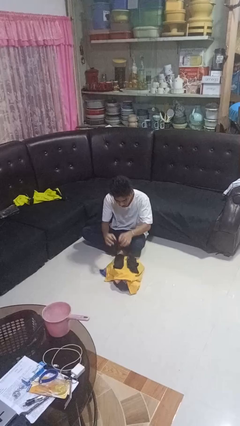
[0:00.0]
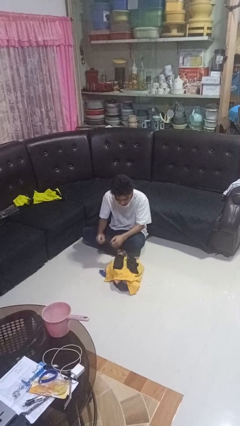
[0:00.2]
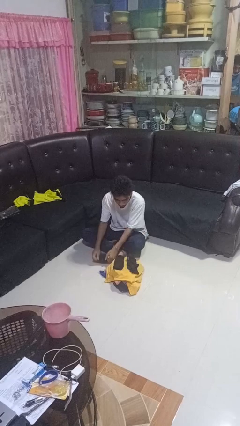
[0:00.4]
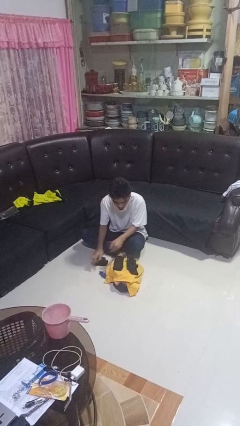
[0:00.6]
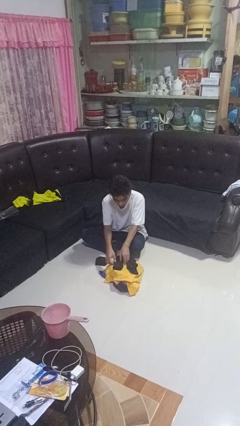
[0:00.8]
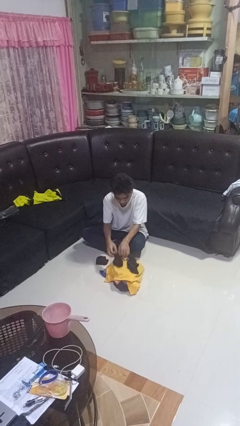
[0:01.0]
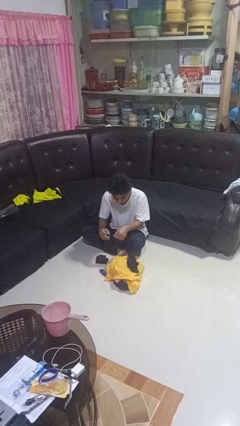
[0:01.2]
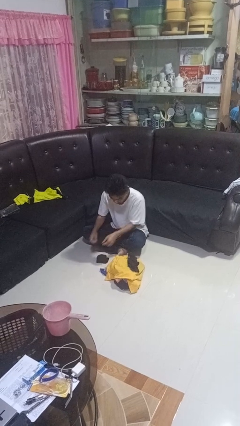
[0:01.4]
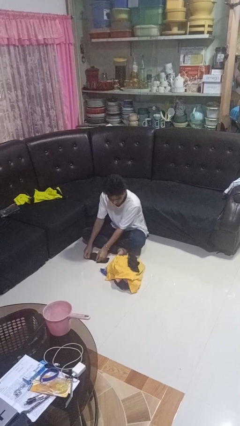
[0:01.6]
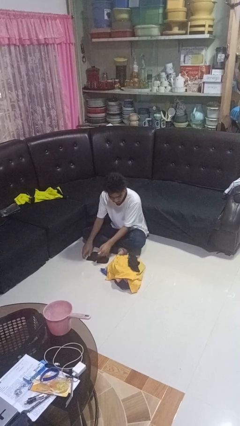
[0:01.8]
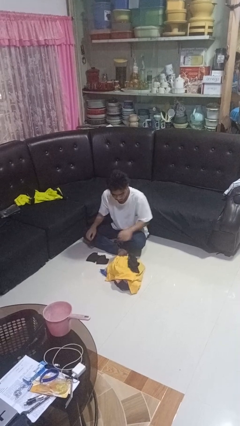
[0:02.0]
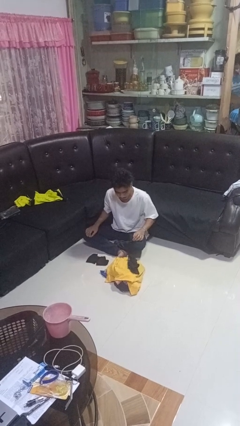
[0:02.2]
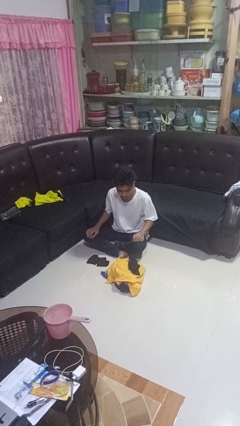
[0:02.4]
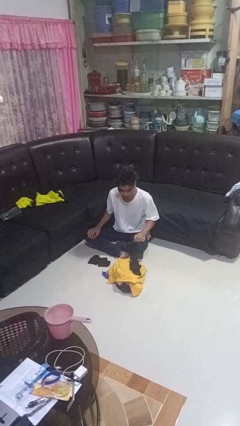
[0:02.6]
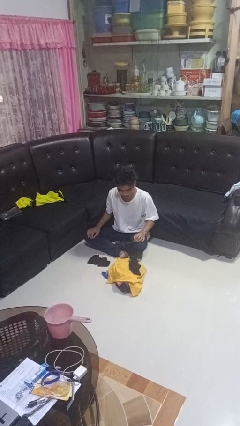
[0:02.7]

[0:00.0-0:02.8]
person folds socks

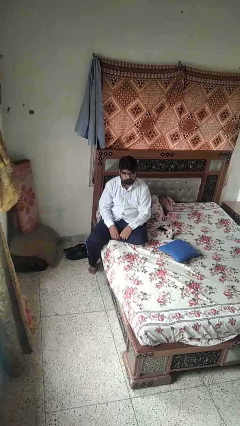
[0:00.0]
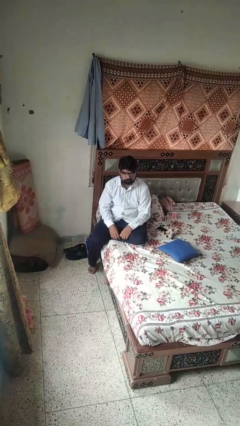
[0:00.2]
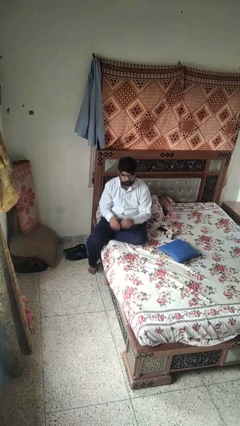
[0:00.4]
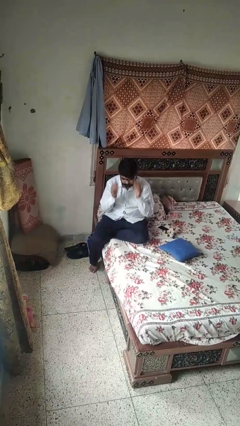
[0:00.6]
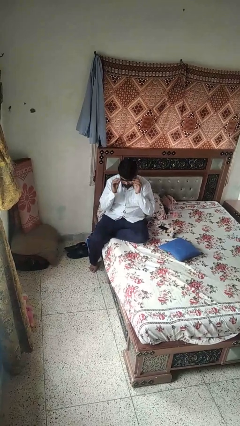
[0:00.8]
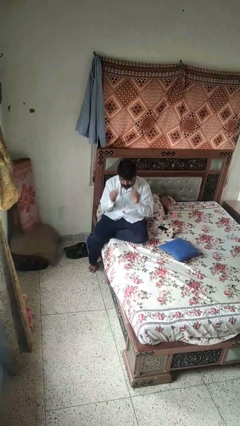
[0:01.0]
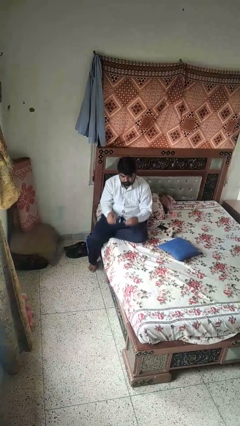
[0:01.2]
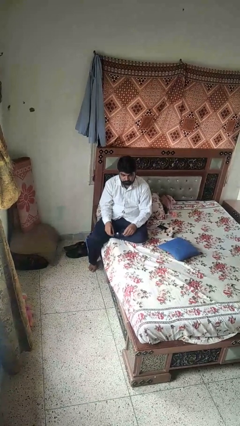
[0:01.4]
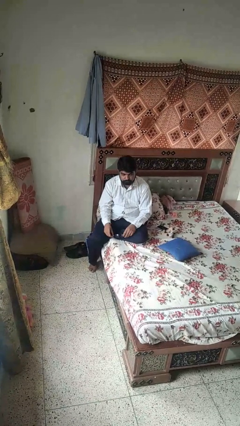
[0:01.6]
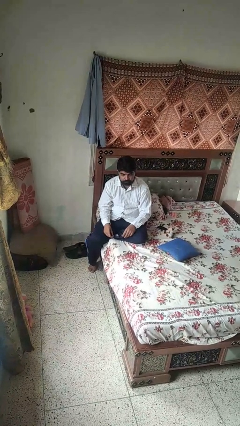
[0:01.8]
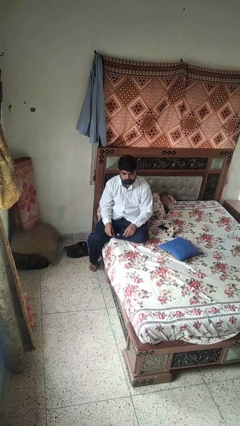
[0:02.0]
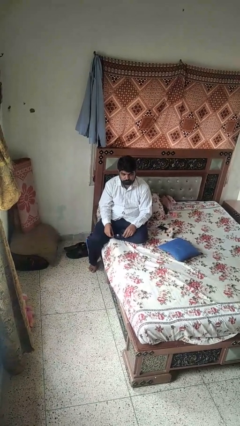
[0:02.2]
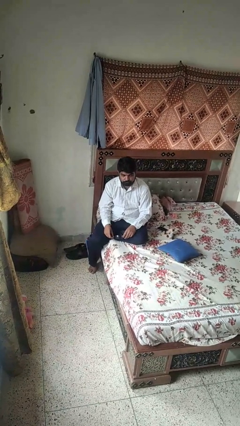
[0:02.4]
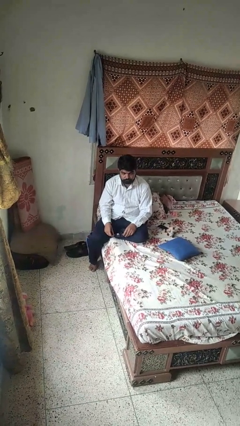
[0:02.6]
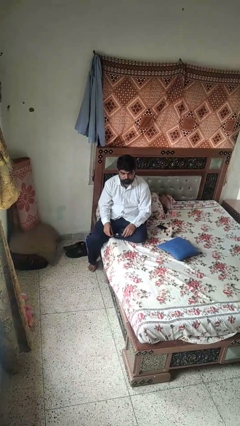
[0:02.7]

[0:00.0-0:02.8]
person takes off glasses

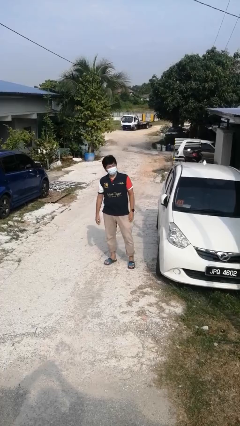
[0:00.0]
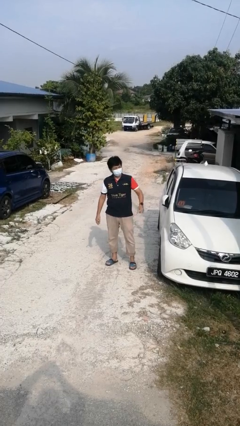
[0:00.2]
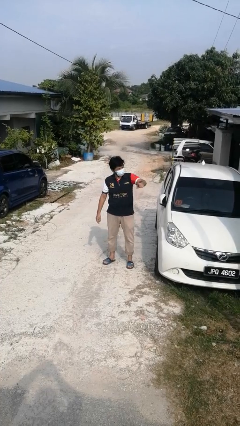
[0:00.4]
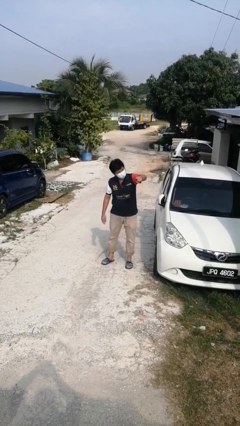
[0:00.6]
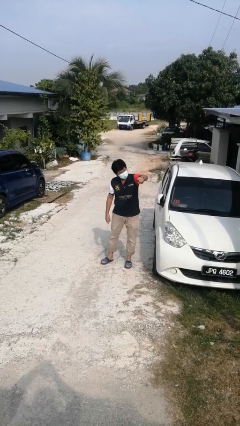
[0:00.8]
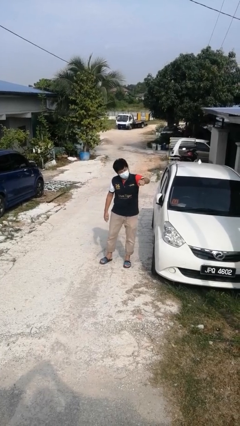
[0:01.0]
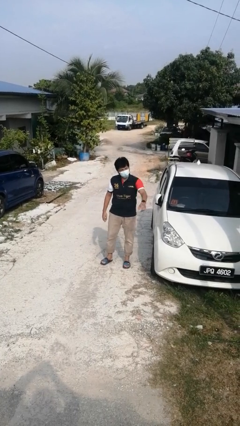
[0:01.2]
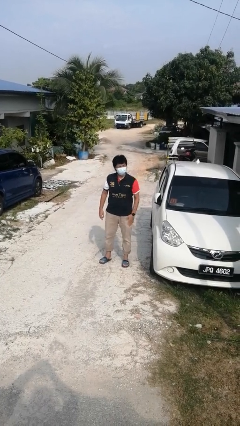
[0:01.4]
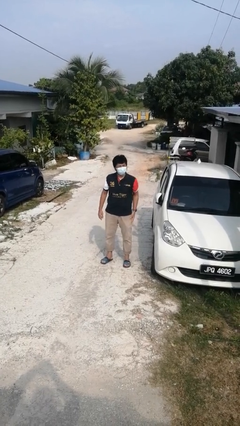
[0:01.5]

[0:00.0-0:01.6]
person points at person

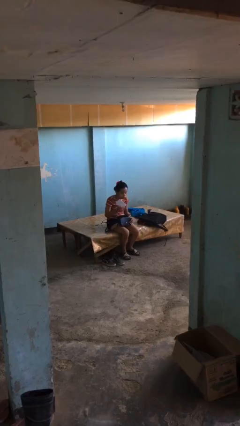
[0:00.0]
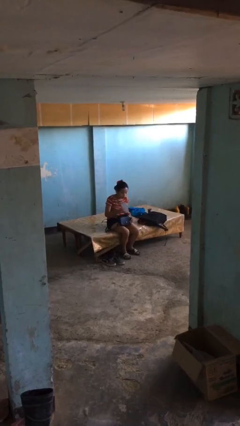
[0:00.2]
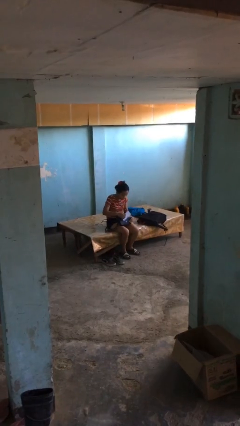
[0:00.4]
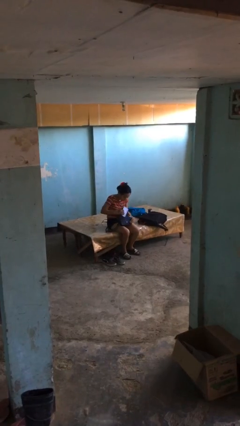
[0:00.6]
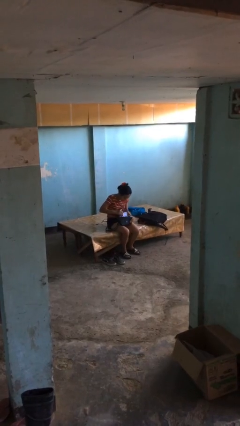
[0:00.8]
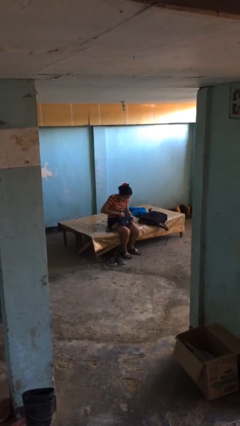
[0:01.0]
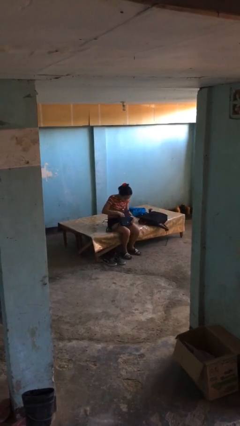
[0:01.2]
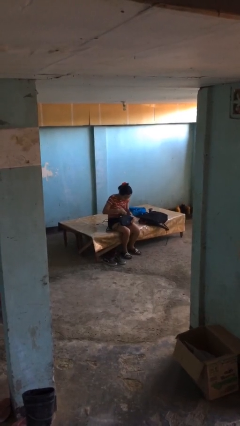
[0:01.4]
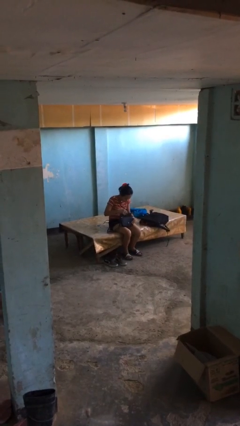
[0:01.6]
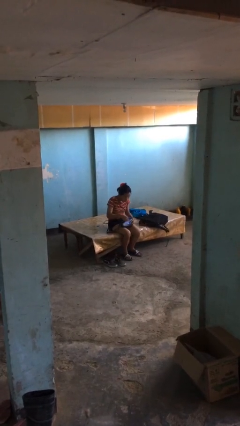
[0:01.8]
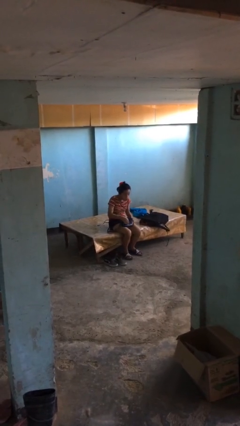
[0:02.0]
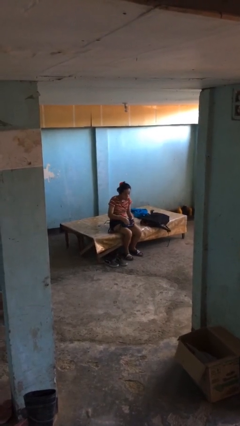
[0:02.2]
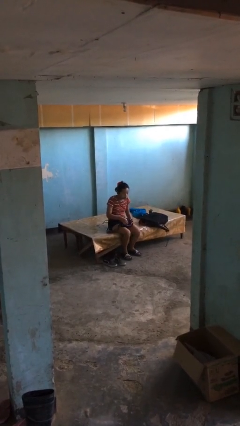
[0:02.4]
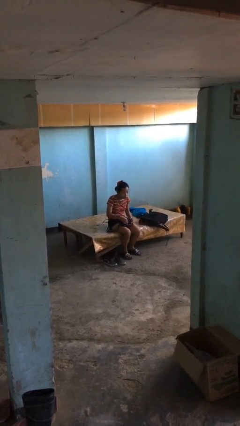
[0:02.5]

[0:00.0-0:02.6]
person puts object into purse

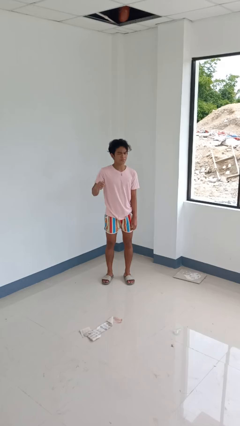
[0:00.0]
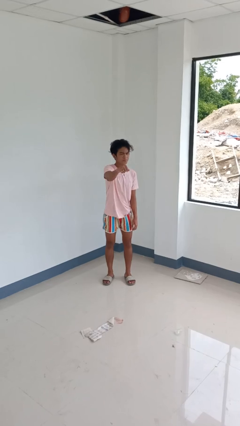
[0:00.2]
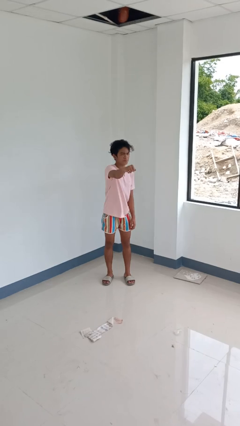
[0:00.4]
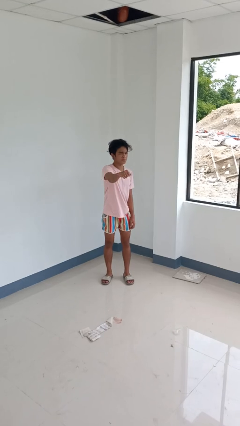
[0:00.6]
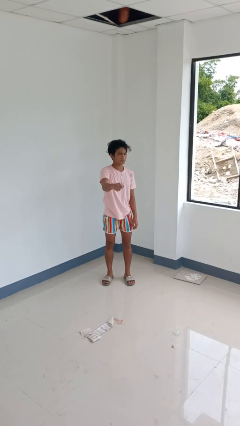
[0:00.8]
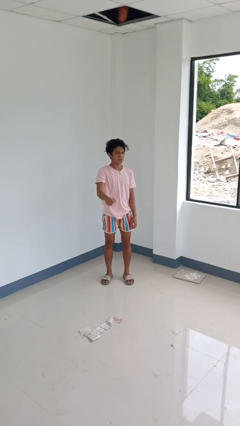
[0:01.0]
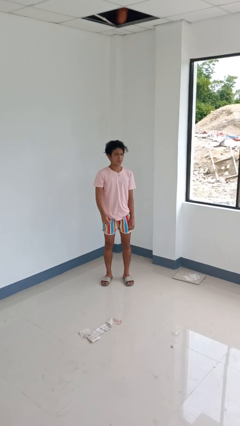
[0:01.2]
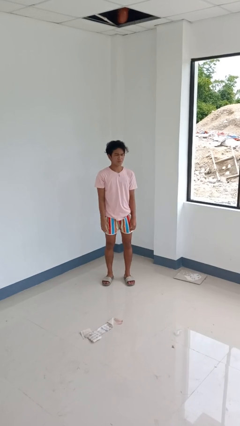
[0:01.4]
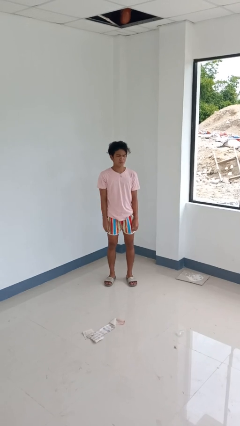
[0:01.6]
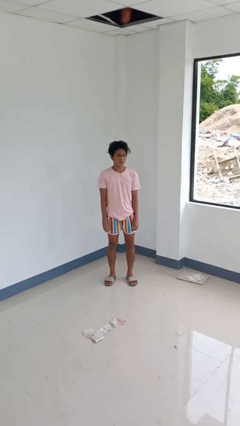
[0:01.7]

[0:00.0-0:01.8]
person punches

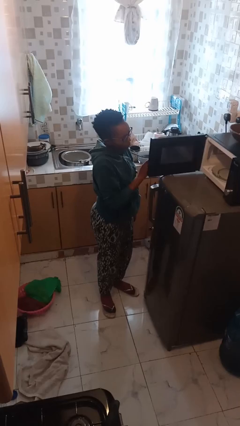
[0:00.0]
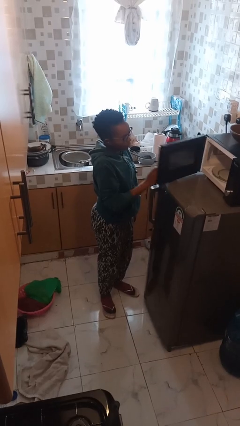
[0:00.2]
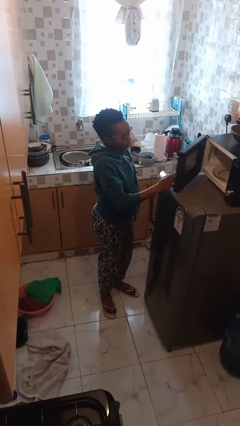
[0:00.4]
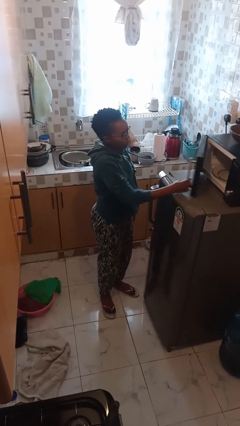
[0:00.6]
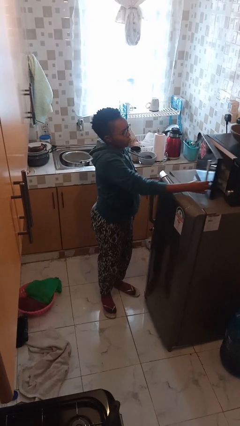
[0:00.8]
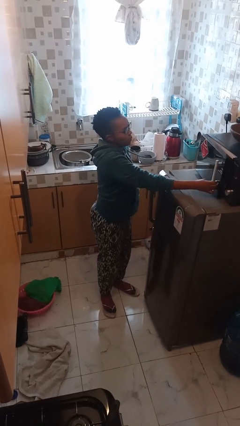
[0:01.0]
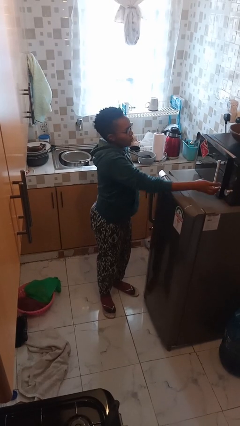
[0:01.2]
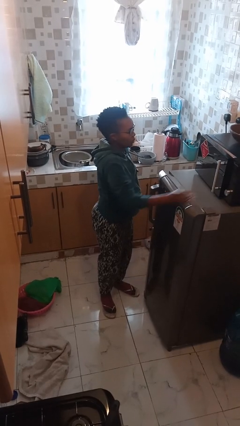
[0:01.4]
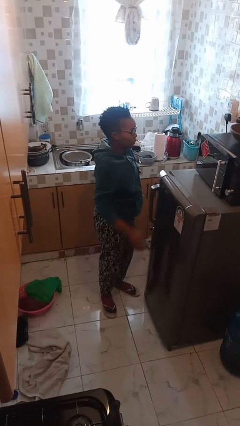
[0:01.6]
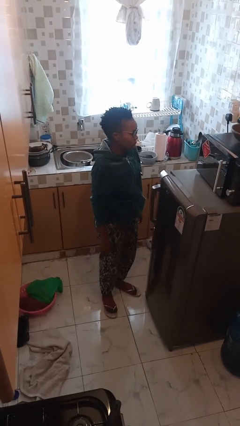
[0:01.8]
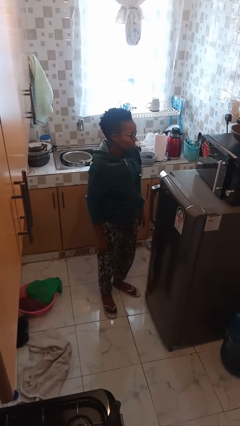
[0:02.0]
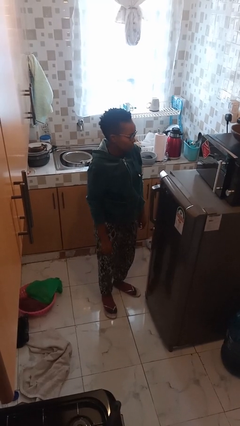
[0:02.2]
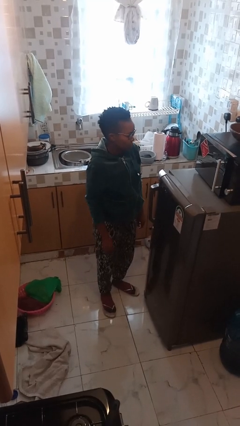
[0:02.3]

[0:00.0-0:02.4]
person closes microwave

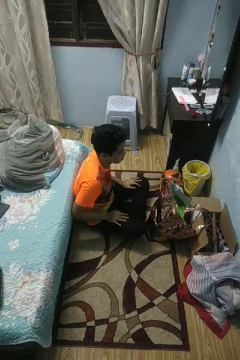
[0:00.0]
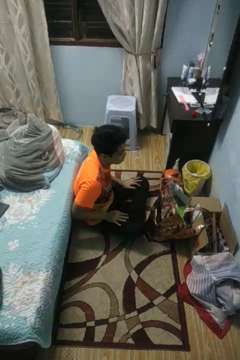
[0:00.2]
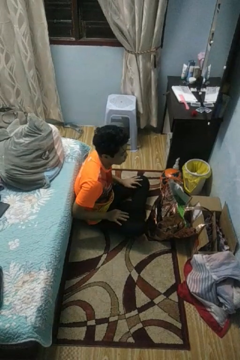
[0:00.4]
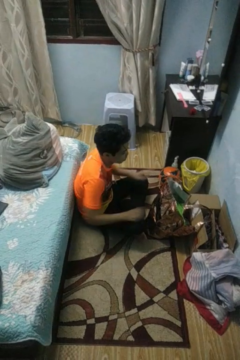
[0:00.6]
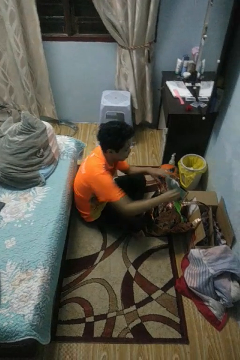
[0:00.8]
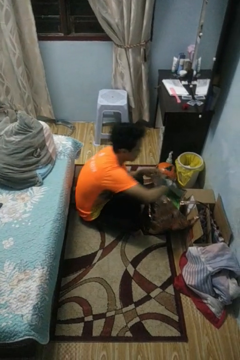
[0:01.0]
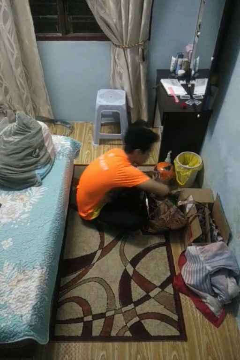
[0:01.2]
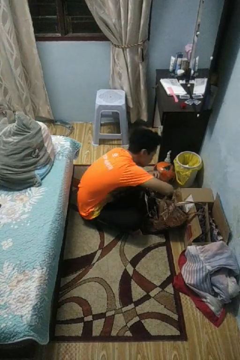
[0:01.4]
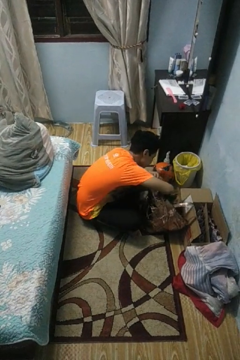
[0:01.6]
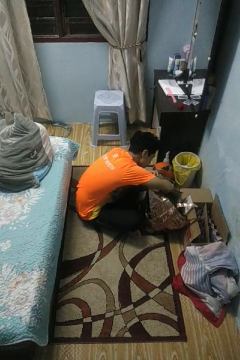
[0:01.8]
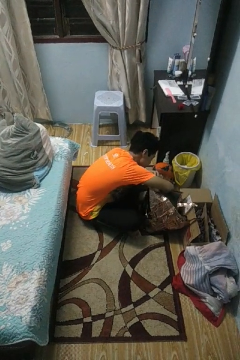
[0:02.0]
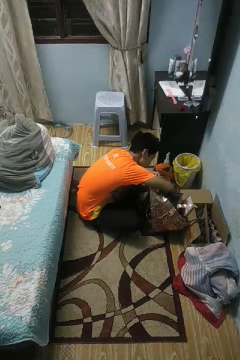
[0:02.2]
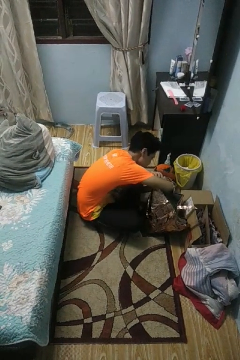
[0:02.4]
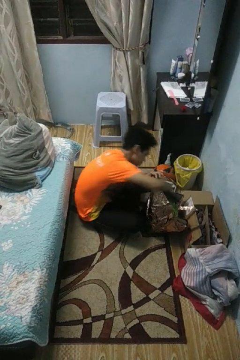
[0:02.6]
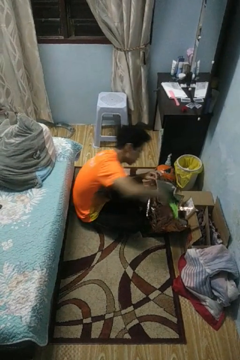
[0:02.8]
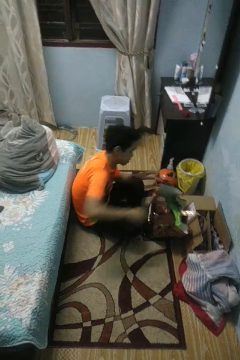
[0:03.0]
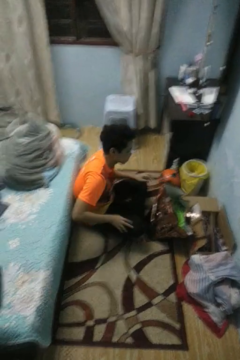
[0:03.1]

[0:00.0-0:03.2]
person searches in bag

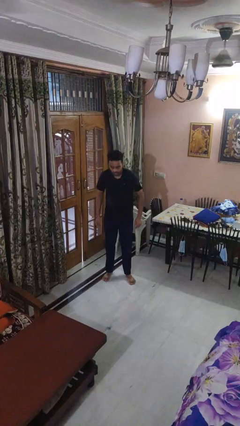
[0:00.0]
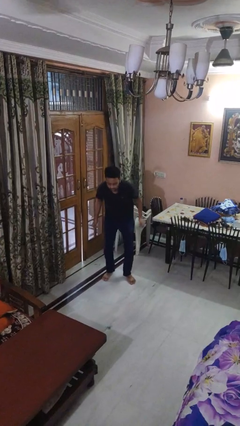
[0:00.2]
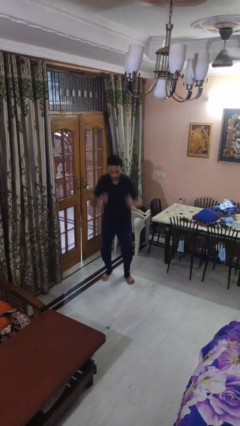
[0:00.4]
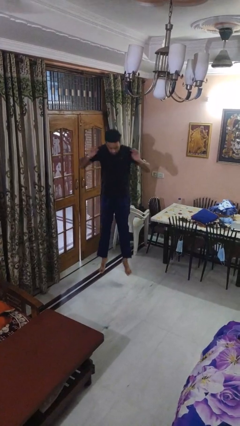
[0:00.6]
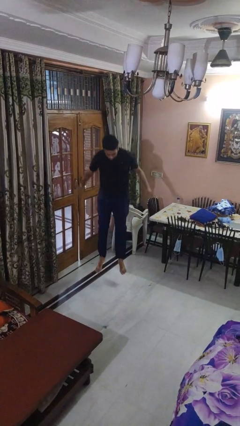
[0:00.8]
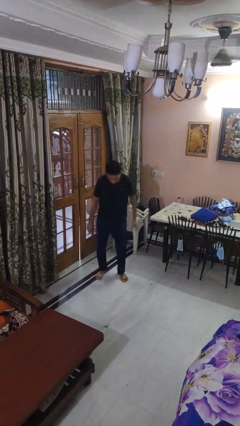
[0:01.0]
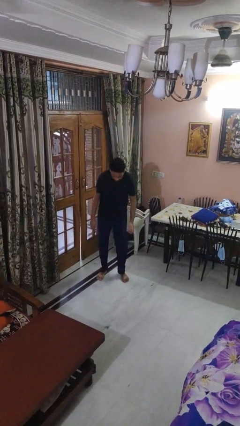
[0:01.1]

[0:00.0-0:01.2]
person jumps
